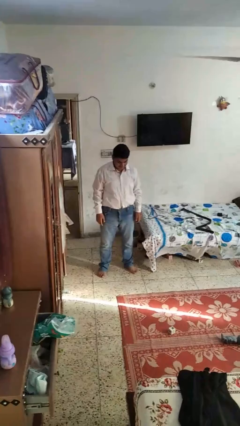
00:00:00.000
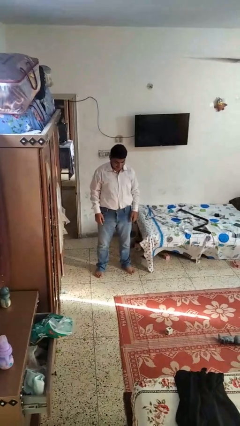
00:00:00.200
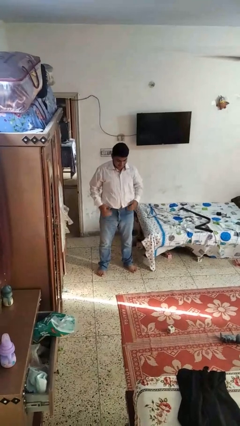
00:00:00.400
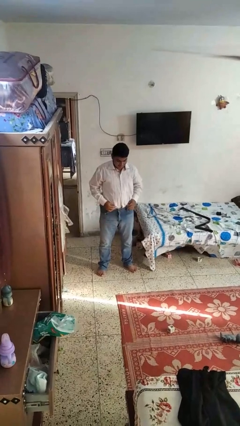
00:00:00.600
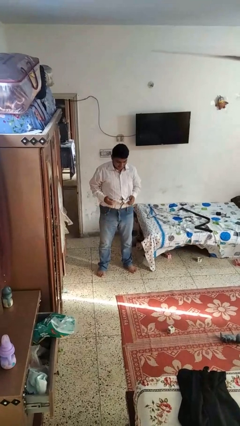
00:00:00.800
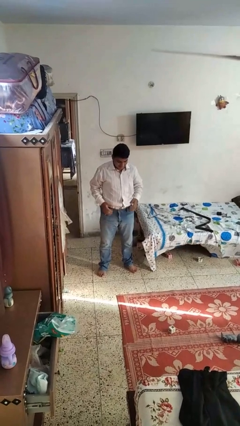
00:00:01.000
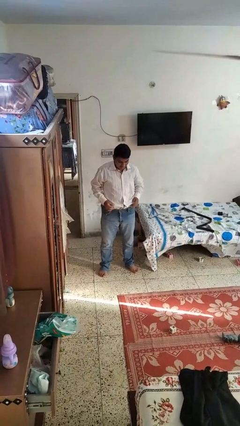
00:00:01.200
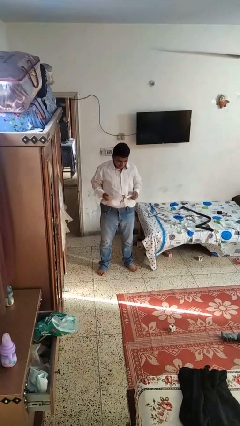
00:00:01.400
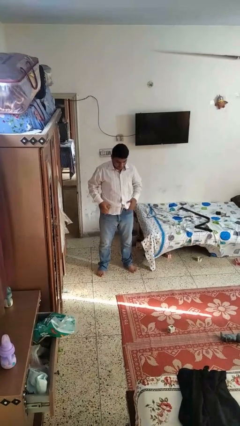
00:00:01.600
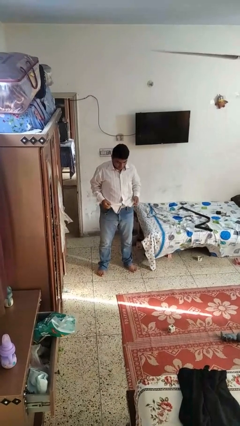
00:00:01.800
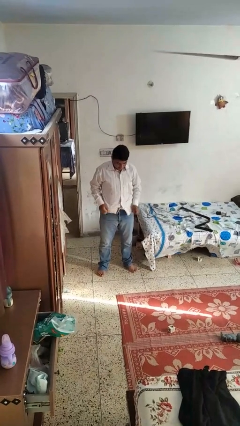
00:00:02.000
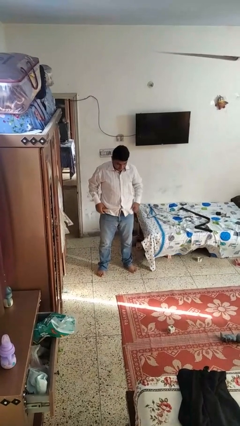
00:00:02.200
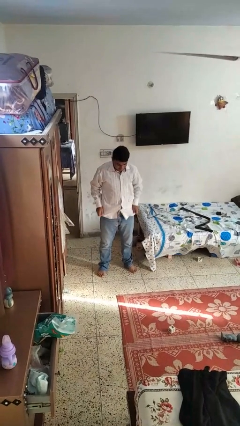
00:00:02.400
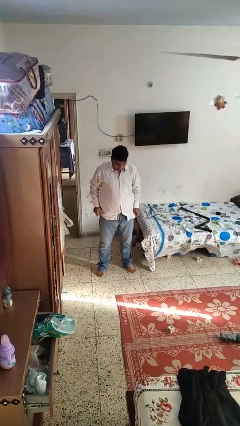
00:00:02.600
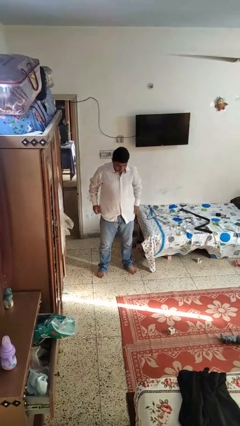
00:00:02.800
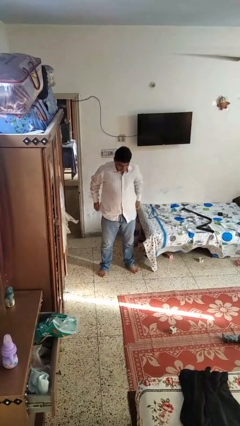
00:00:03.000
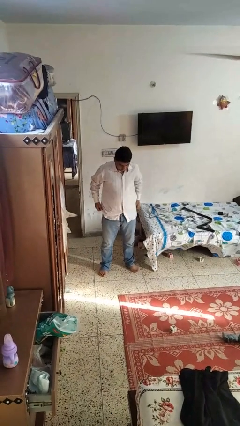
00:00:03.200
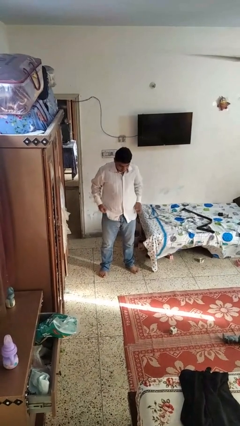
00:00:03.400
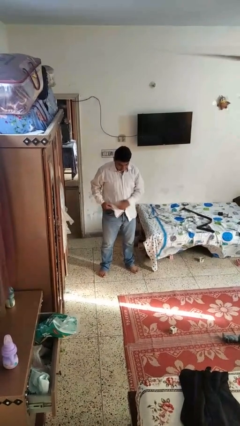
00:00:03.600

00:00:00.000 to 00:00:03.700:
person untucks shirt

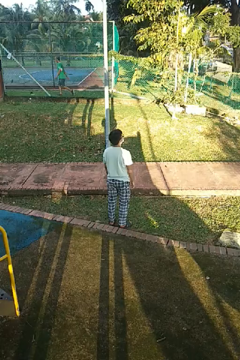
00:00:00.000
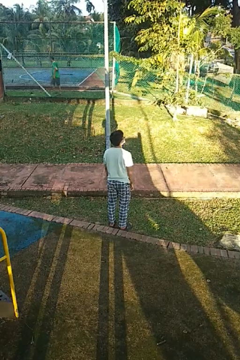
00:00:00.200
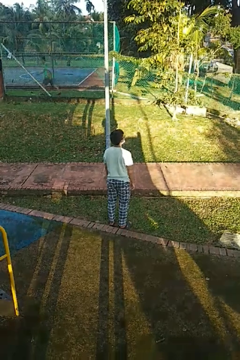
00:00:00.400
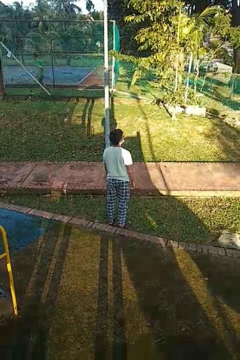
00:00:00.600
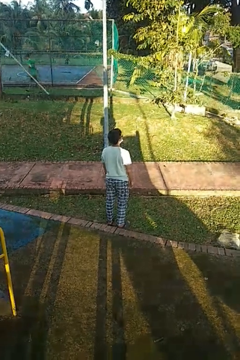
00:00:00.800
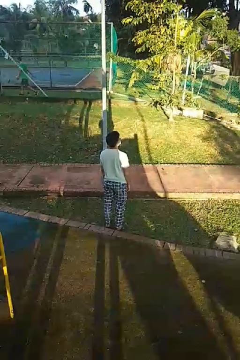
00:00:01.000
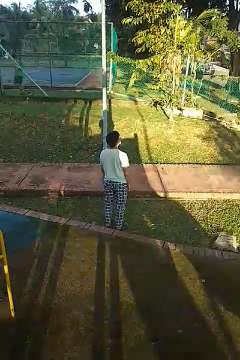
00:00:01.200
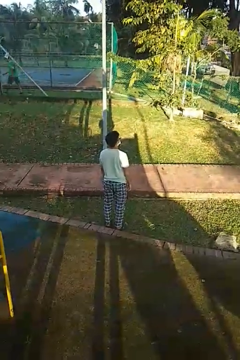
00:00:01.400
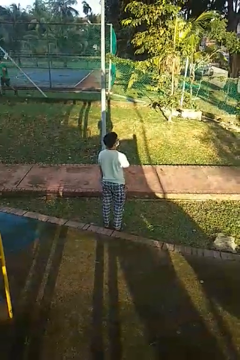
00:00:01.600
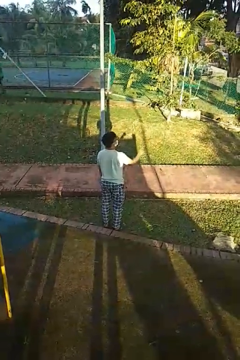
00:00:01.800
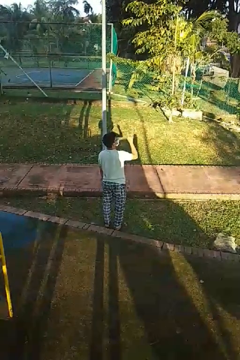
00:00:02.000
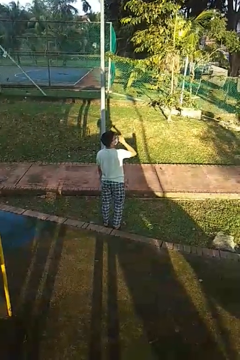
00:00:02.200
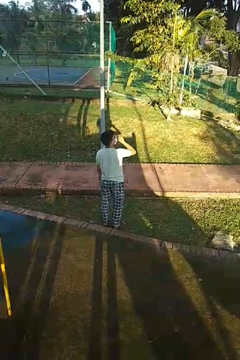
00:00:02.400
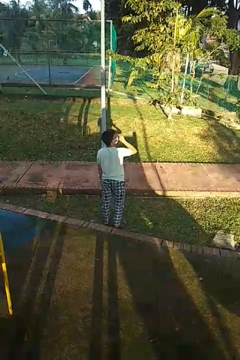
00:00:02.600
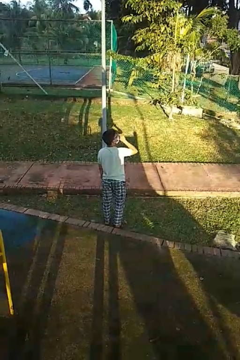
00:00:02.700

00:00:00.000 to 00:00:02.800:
person gestures be quiet

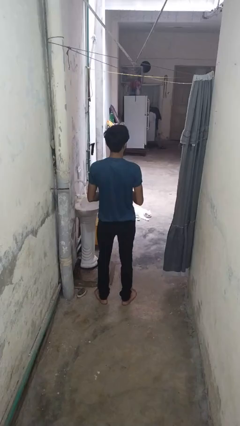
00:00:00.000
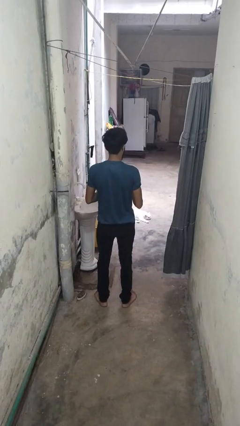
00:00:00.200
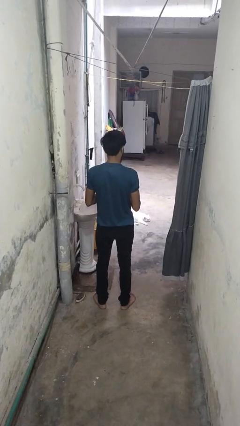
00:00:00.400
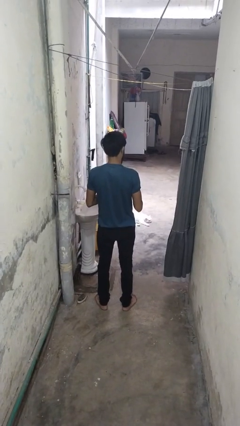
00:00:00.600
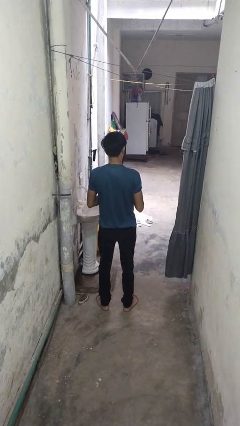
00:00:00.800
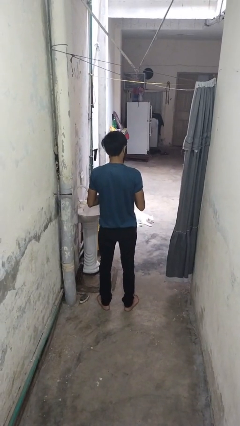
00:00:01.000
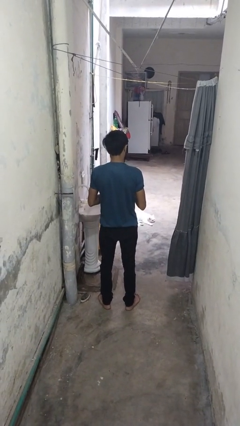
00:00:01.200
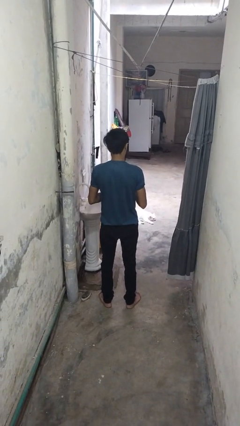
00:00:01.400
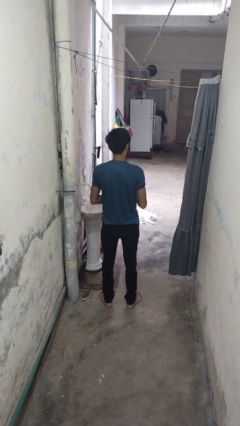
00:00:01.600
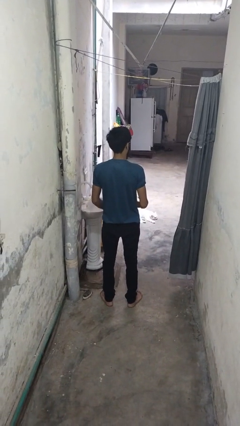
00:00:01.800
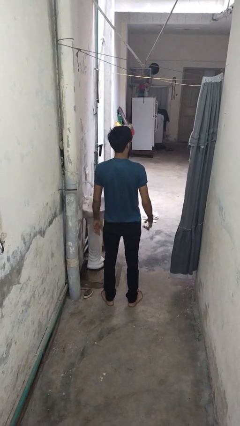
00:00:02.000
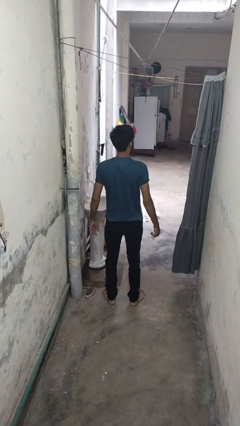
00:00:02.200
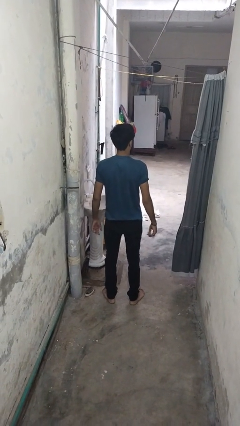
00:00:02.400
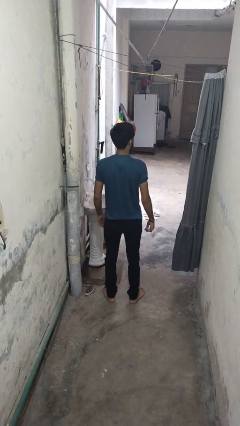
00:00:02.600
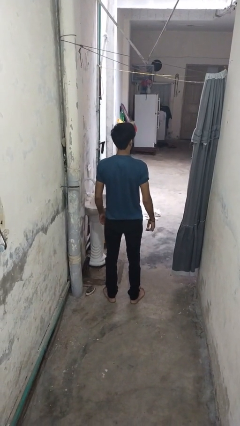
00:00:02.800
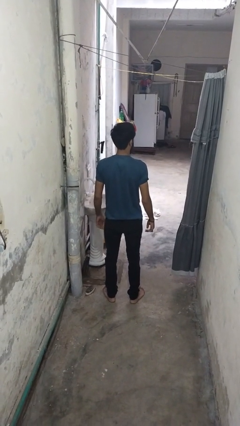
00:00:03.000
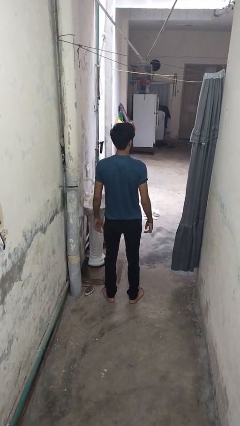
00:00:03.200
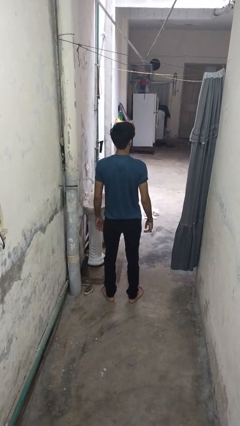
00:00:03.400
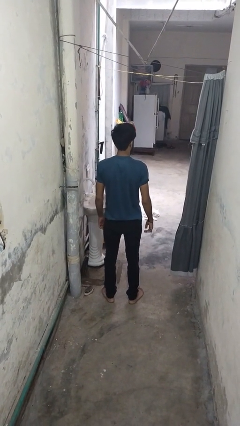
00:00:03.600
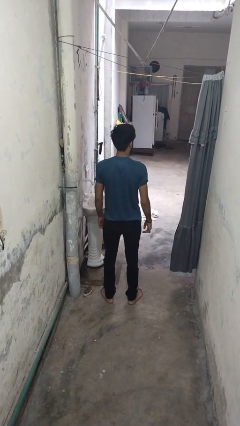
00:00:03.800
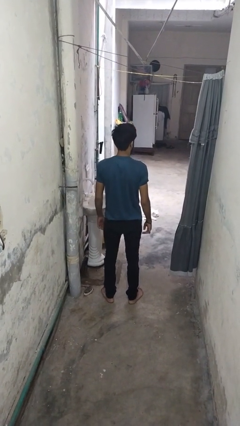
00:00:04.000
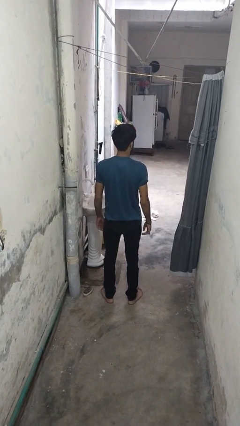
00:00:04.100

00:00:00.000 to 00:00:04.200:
person puts on ring

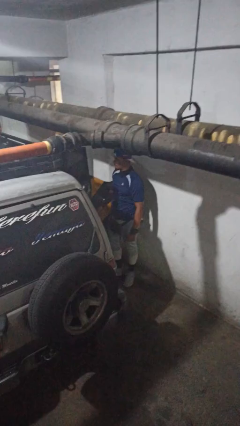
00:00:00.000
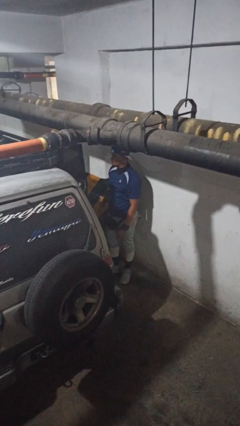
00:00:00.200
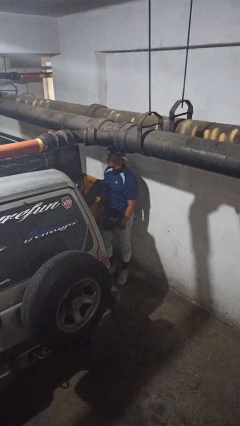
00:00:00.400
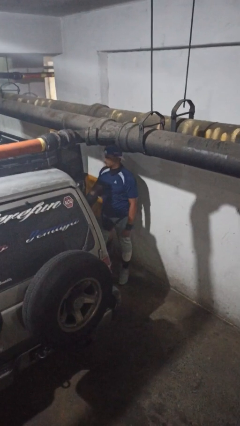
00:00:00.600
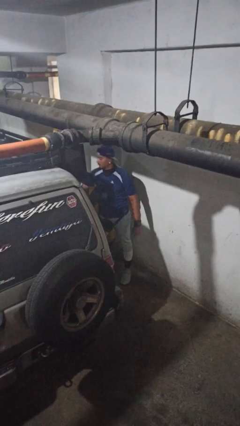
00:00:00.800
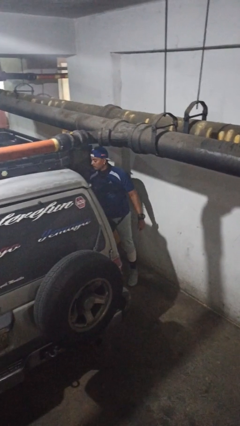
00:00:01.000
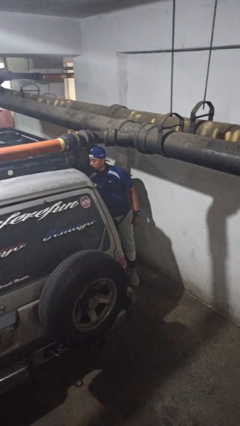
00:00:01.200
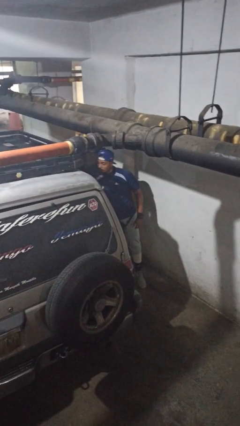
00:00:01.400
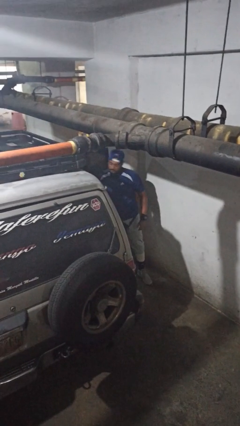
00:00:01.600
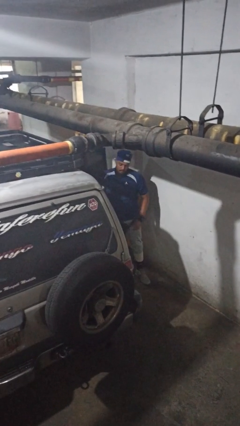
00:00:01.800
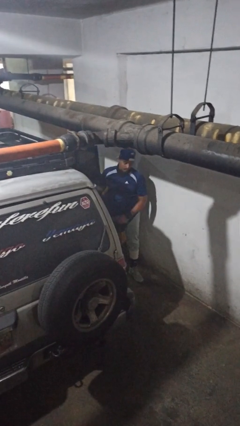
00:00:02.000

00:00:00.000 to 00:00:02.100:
person unloads car

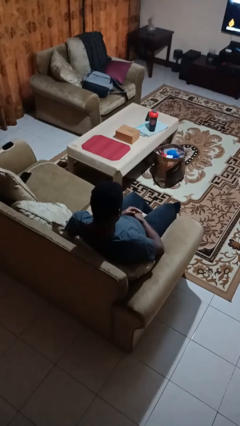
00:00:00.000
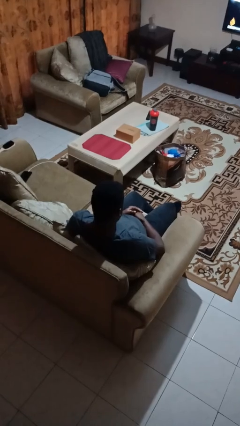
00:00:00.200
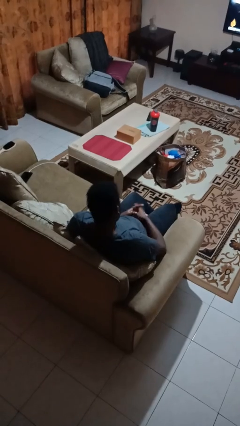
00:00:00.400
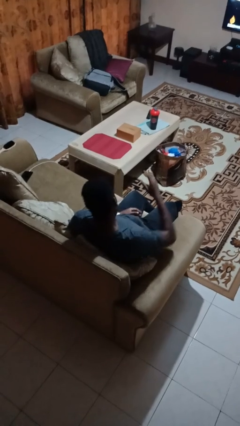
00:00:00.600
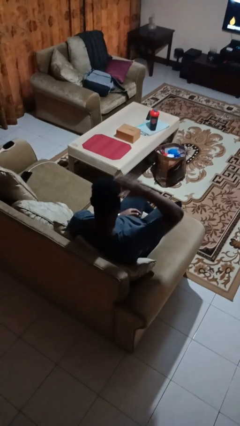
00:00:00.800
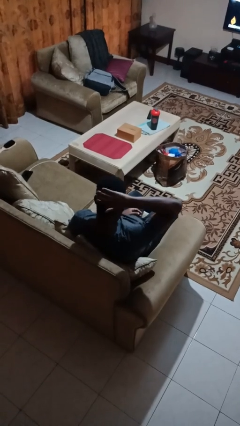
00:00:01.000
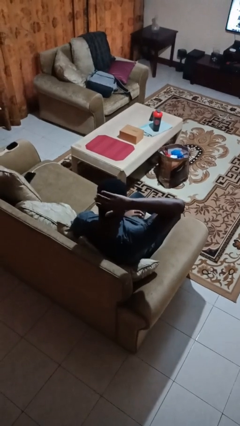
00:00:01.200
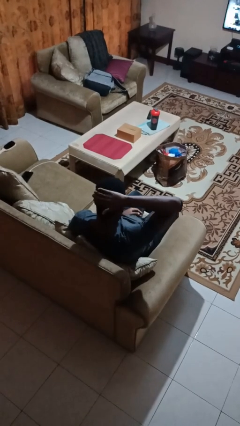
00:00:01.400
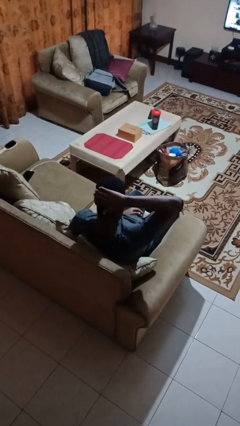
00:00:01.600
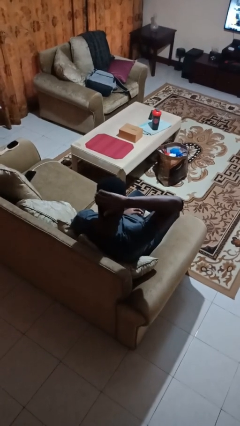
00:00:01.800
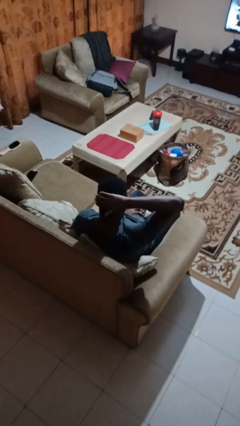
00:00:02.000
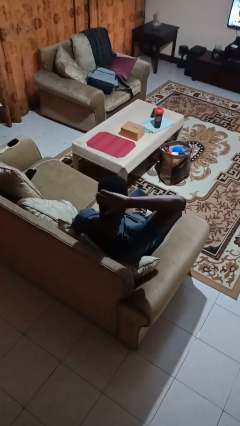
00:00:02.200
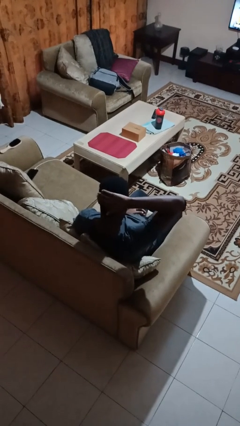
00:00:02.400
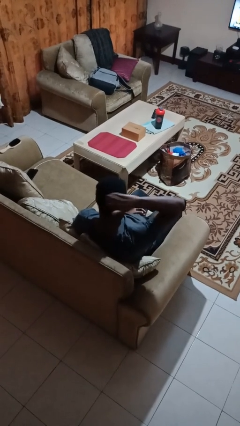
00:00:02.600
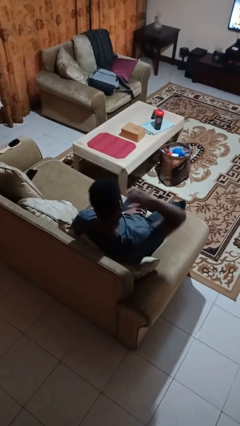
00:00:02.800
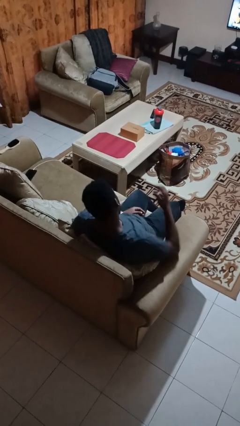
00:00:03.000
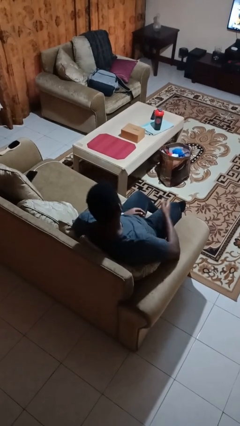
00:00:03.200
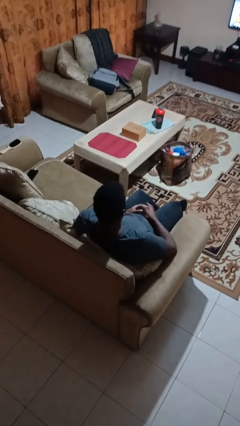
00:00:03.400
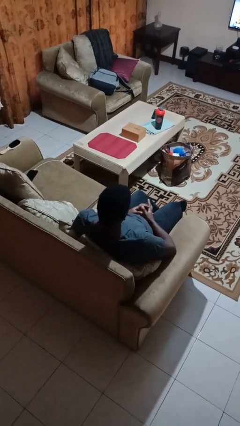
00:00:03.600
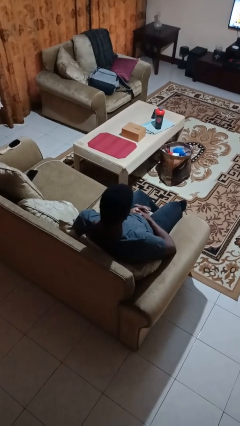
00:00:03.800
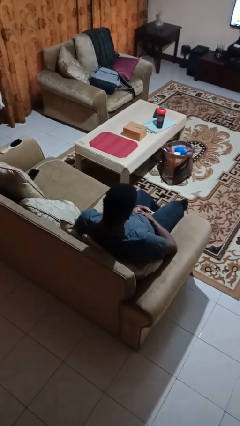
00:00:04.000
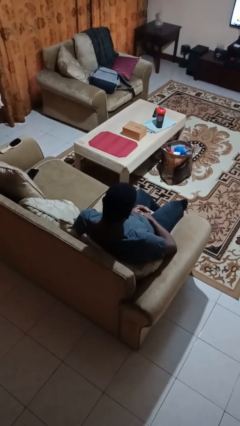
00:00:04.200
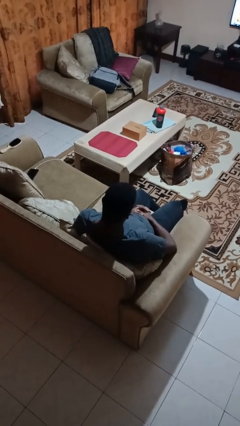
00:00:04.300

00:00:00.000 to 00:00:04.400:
person pats head

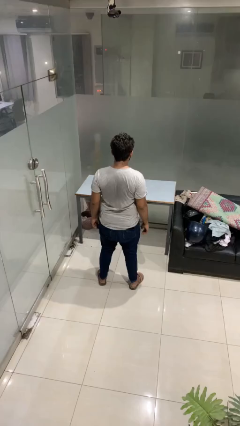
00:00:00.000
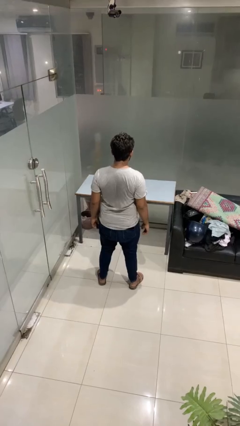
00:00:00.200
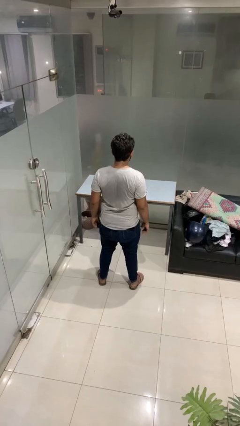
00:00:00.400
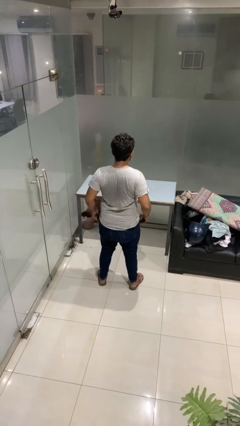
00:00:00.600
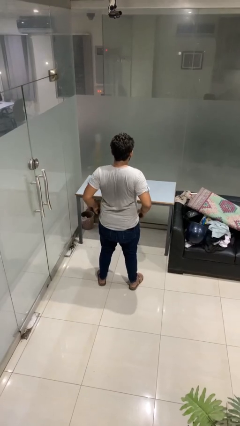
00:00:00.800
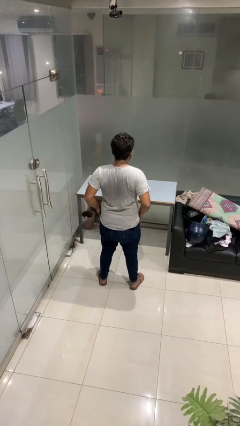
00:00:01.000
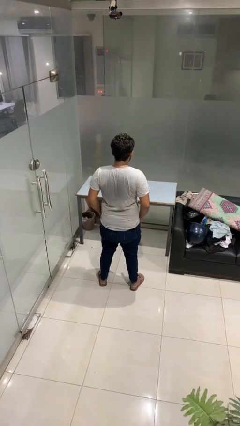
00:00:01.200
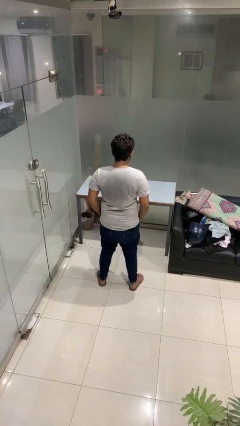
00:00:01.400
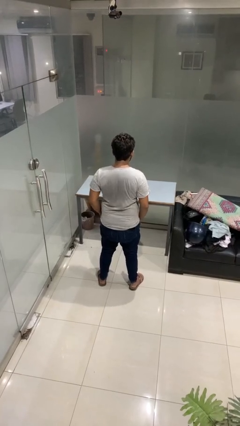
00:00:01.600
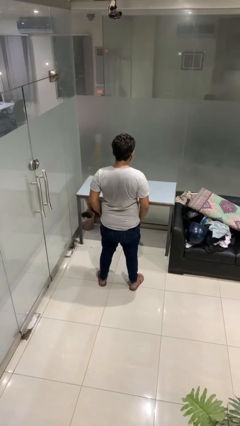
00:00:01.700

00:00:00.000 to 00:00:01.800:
person puts hands in back pockets
